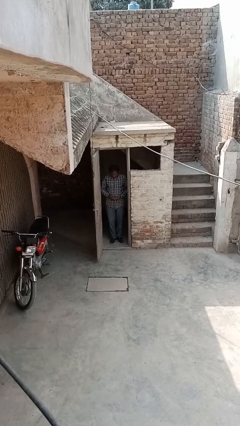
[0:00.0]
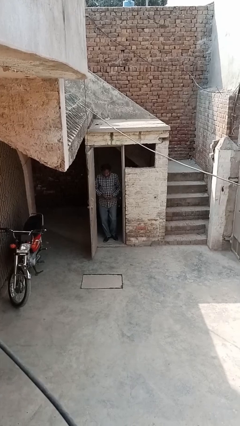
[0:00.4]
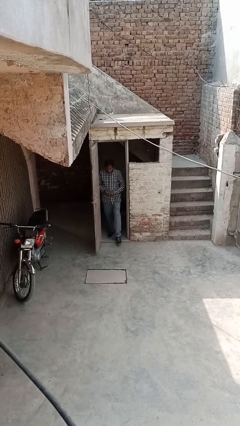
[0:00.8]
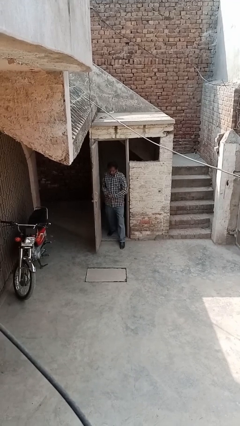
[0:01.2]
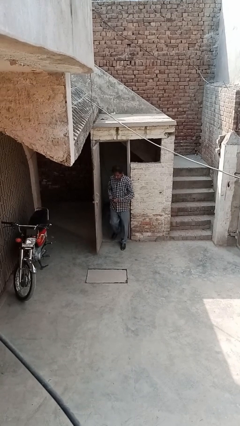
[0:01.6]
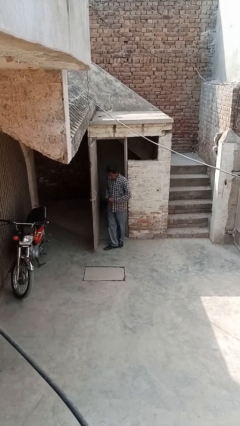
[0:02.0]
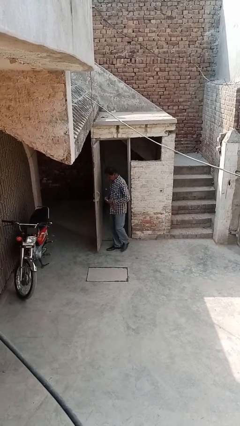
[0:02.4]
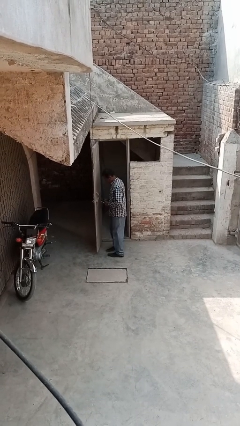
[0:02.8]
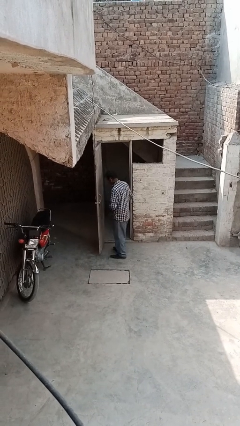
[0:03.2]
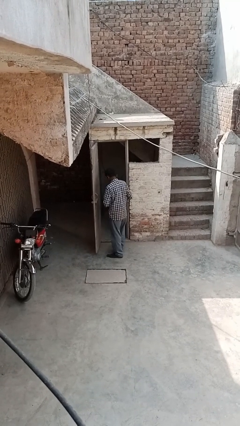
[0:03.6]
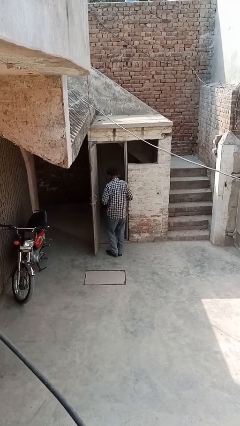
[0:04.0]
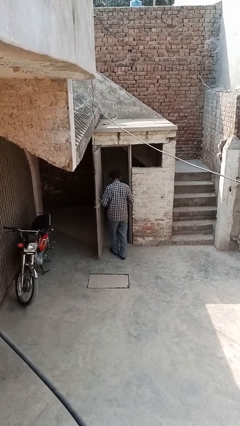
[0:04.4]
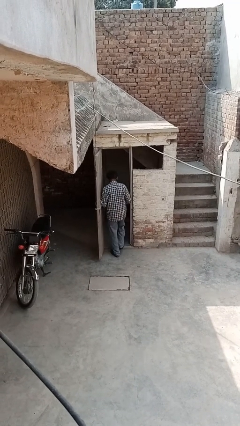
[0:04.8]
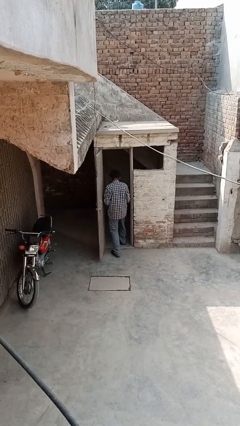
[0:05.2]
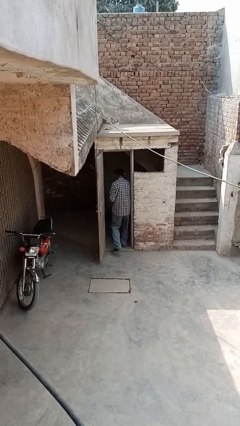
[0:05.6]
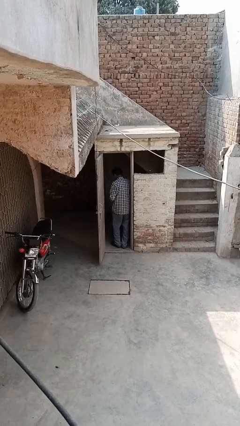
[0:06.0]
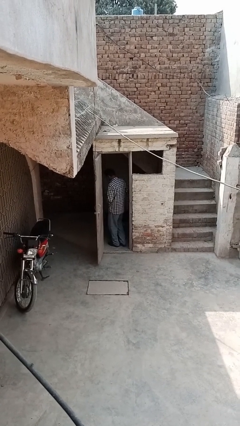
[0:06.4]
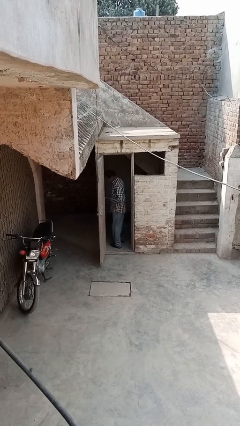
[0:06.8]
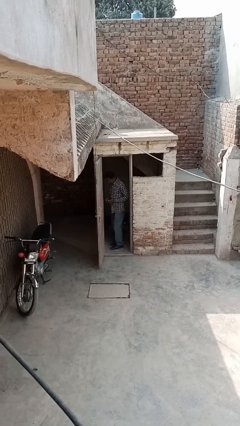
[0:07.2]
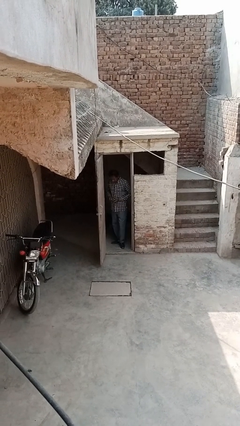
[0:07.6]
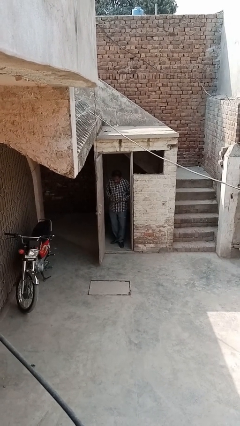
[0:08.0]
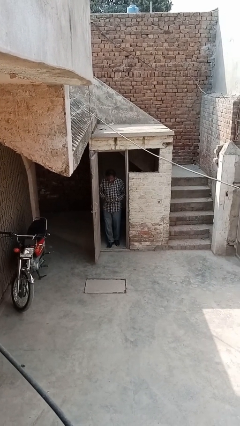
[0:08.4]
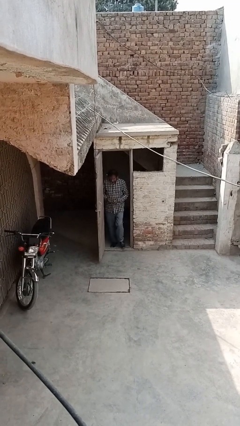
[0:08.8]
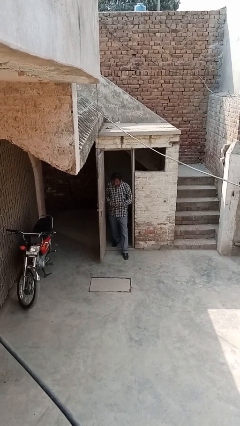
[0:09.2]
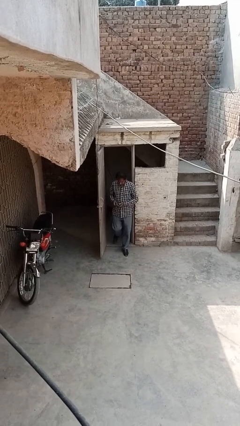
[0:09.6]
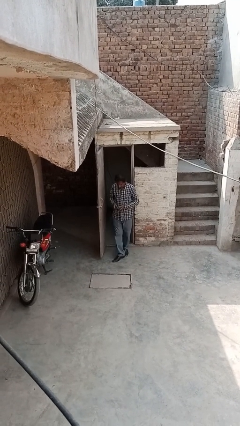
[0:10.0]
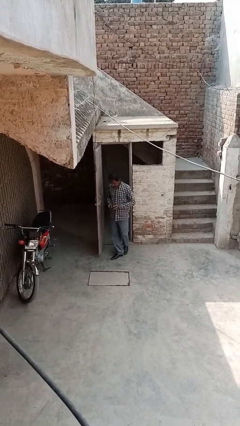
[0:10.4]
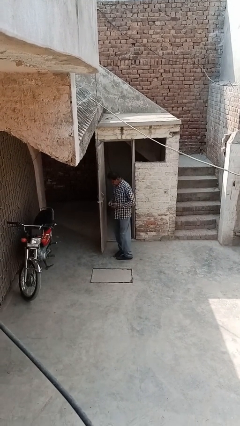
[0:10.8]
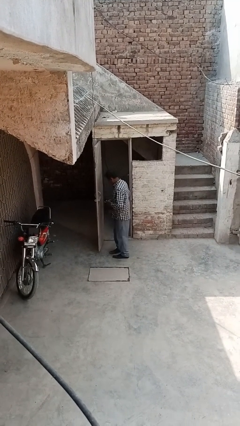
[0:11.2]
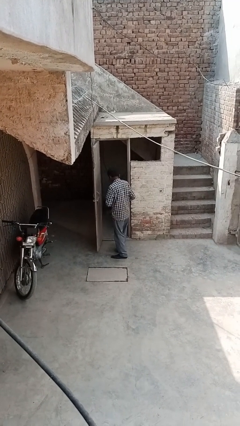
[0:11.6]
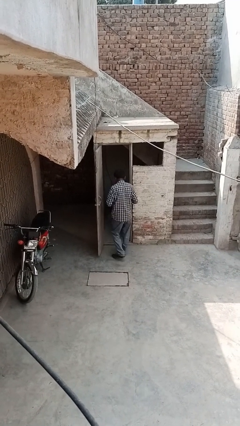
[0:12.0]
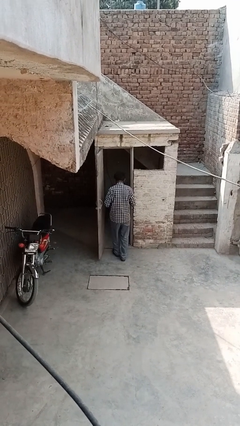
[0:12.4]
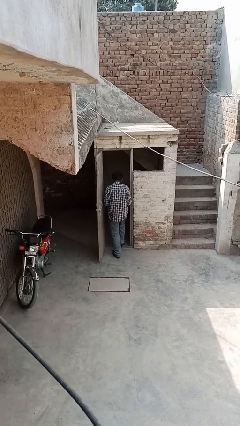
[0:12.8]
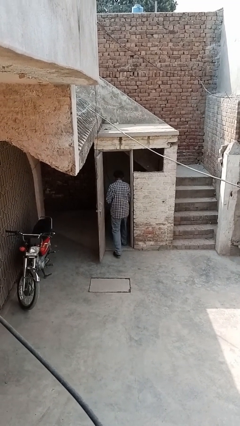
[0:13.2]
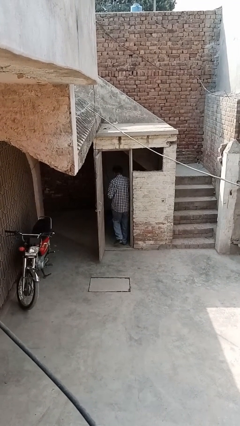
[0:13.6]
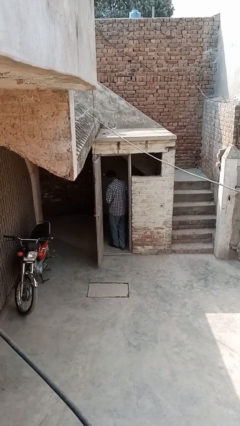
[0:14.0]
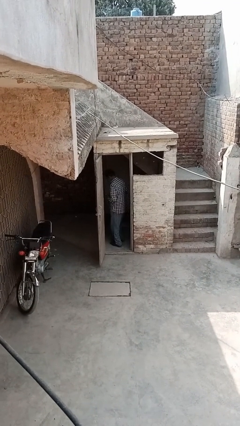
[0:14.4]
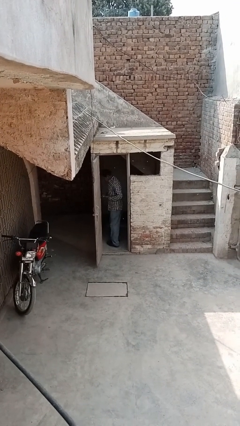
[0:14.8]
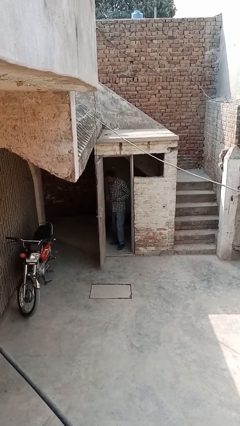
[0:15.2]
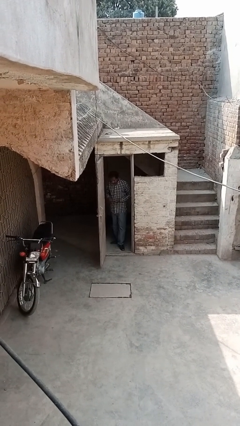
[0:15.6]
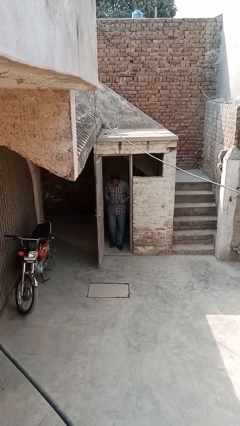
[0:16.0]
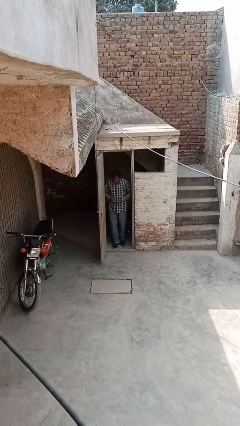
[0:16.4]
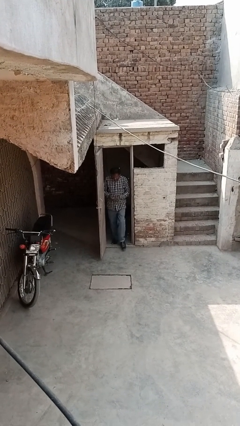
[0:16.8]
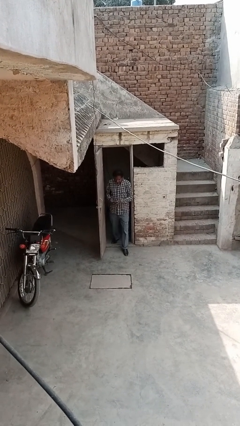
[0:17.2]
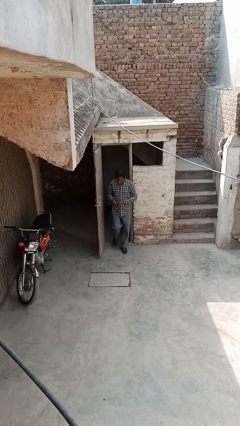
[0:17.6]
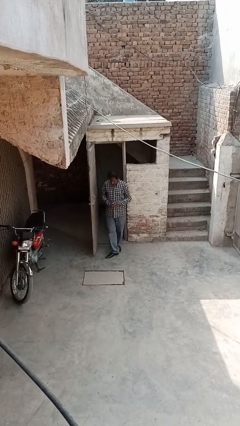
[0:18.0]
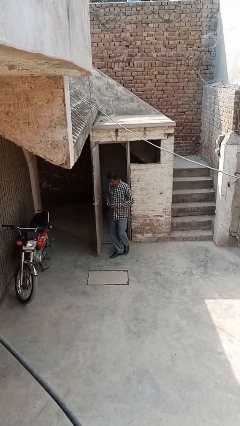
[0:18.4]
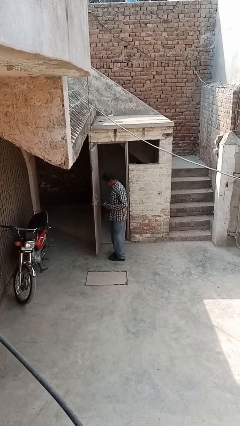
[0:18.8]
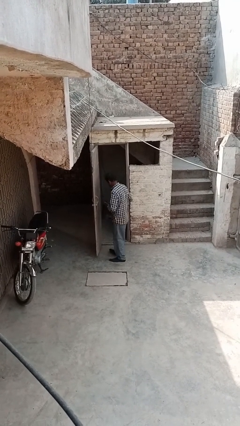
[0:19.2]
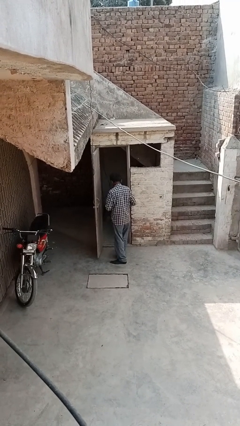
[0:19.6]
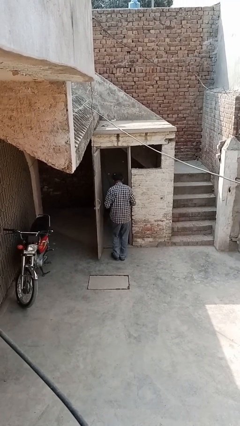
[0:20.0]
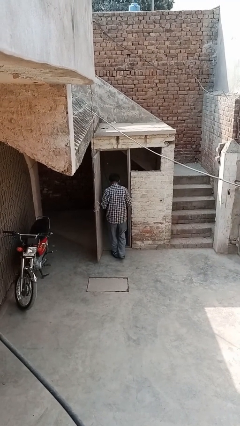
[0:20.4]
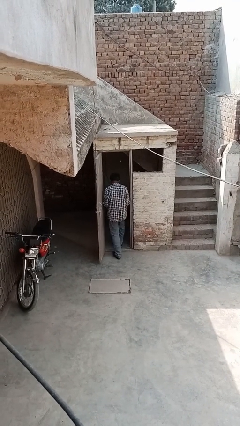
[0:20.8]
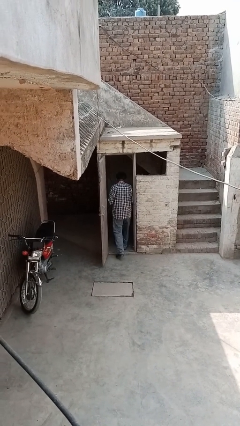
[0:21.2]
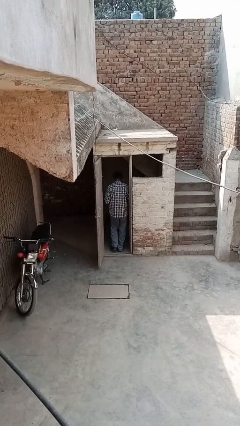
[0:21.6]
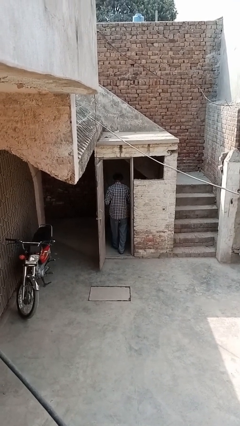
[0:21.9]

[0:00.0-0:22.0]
person texts on phone

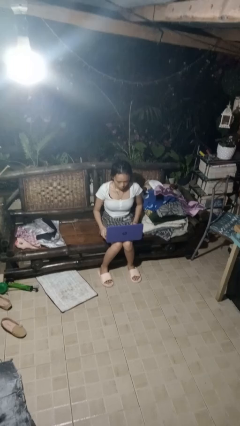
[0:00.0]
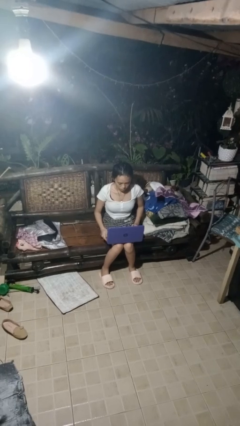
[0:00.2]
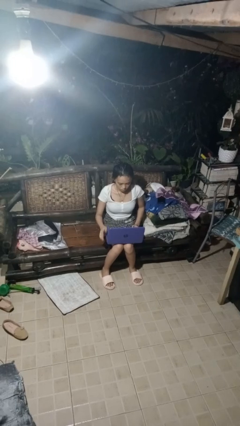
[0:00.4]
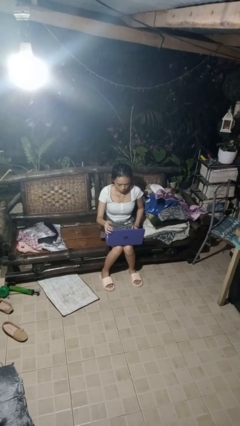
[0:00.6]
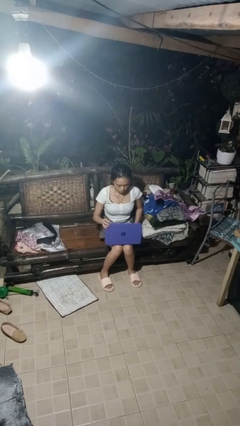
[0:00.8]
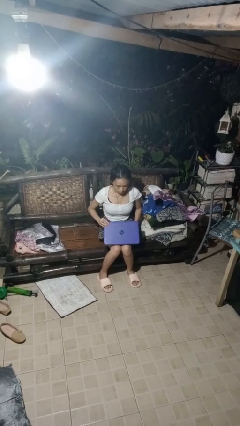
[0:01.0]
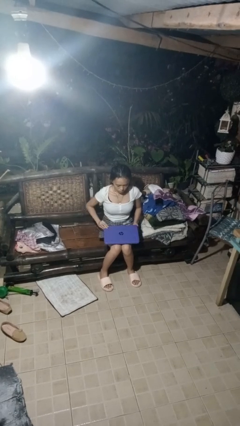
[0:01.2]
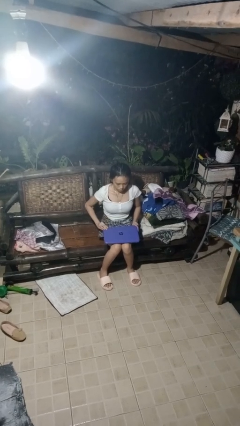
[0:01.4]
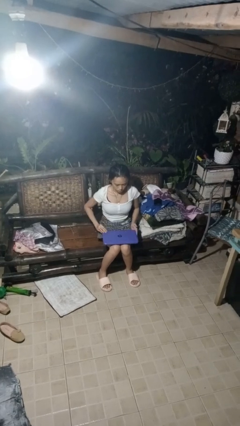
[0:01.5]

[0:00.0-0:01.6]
person closes laptop

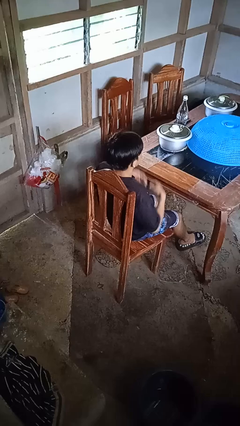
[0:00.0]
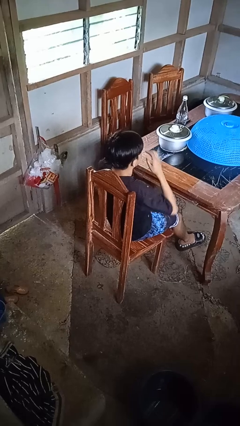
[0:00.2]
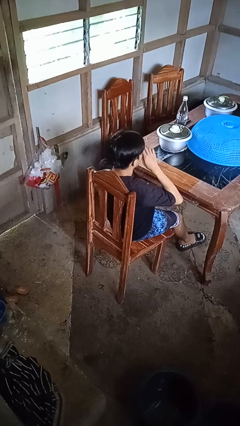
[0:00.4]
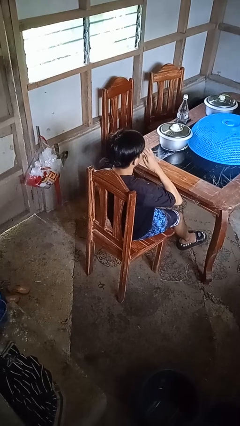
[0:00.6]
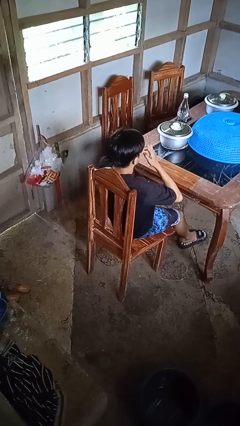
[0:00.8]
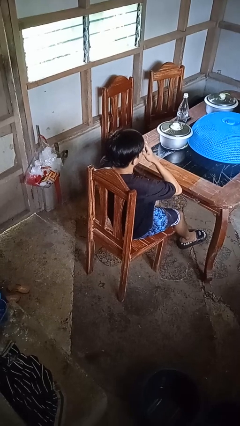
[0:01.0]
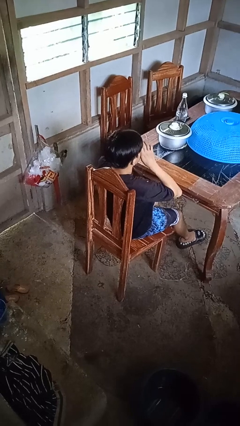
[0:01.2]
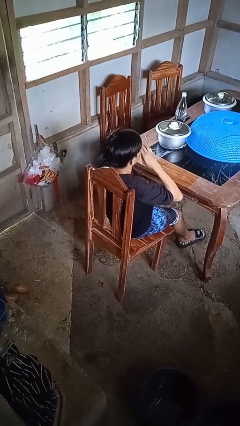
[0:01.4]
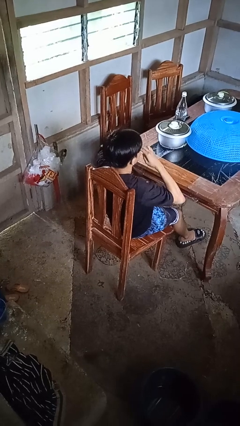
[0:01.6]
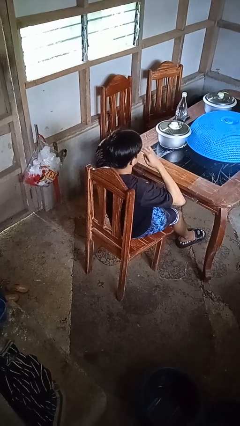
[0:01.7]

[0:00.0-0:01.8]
person rubs eyes

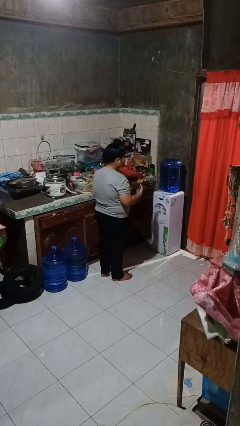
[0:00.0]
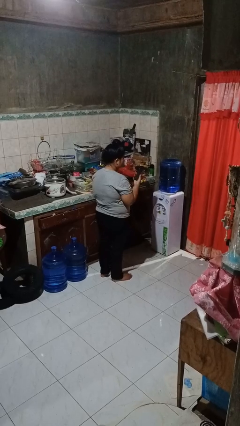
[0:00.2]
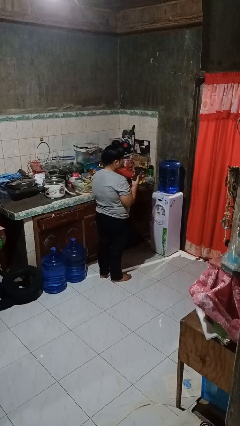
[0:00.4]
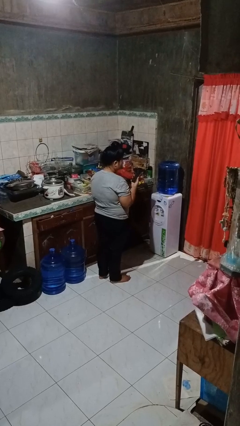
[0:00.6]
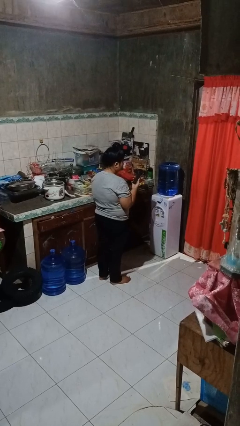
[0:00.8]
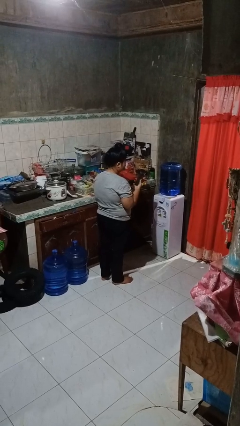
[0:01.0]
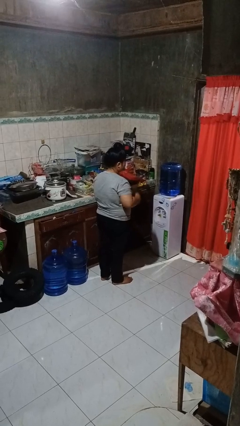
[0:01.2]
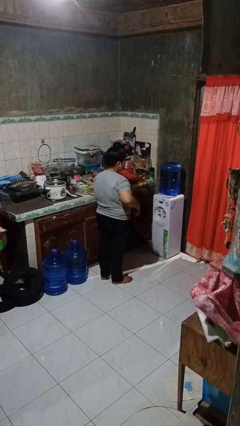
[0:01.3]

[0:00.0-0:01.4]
person takes phone from pocket

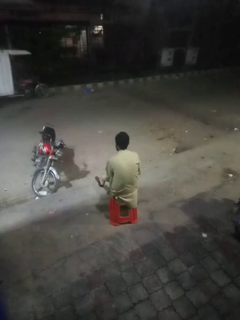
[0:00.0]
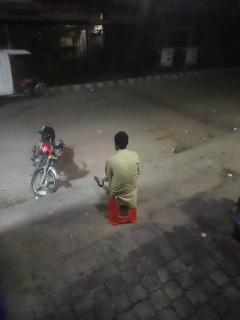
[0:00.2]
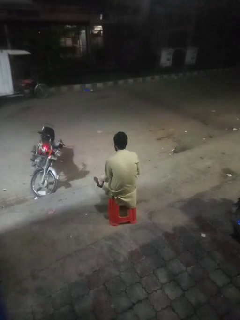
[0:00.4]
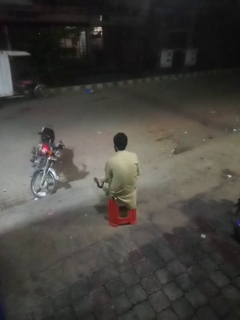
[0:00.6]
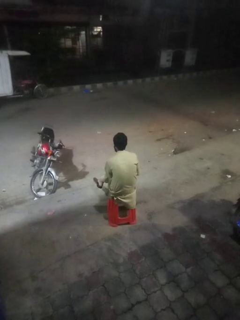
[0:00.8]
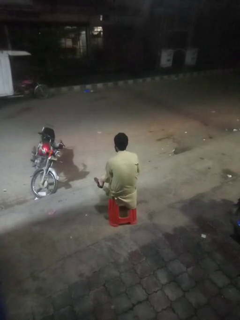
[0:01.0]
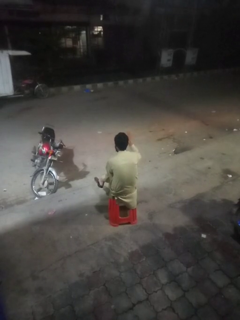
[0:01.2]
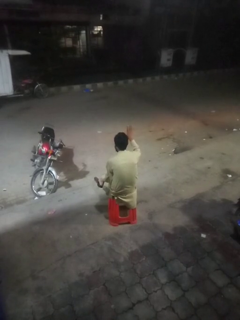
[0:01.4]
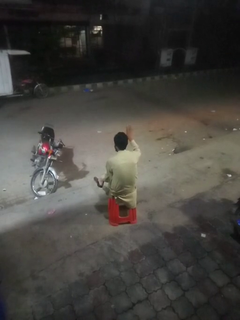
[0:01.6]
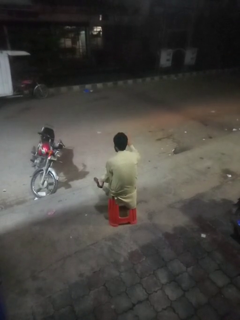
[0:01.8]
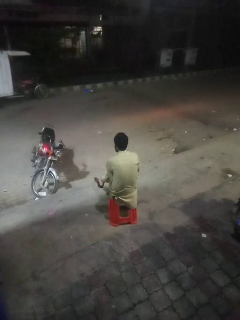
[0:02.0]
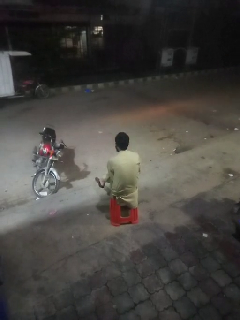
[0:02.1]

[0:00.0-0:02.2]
person gestures number five

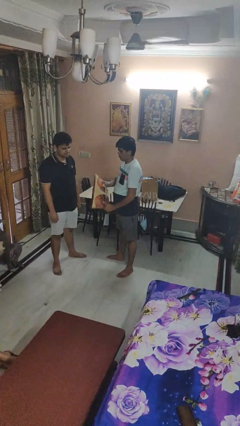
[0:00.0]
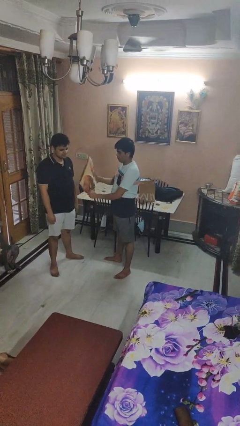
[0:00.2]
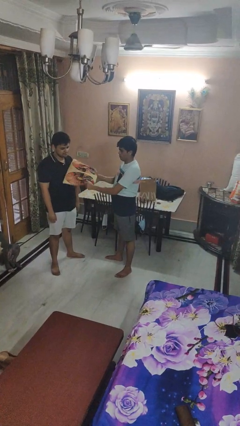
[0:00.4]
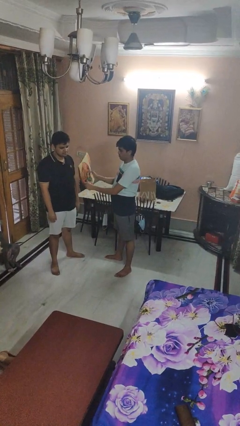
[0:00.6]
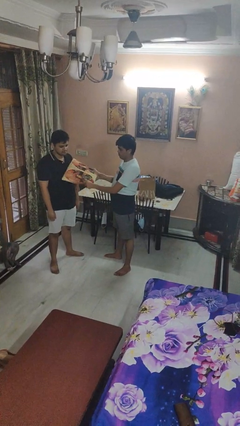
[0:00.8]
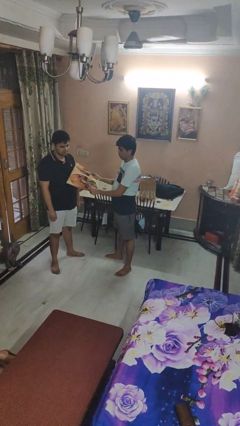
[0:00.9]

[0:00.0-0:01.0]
person hits person with pillow
